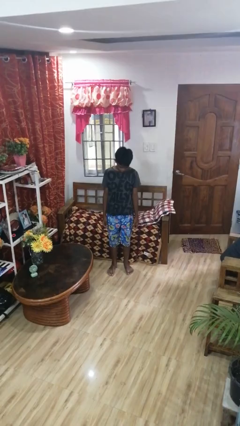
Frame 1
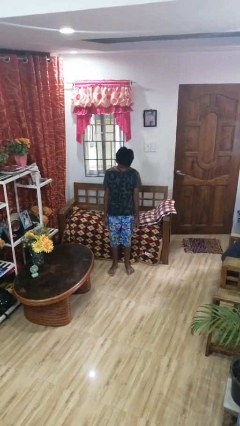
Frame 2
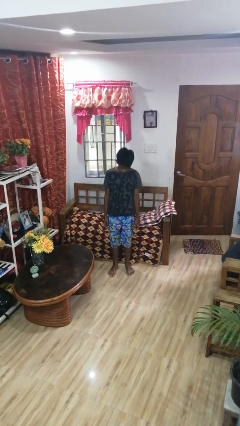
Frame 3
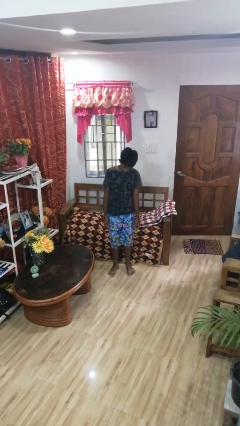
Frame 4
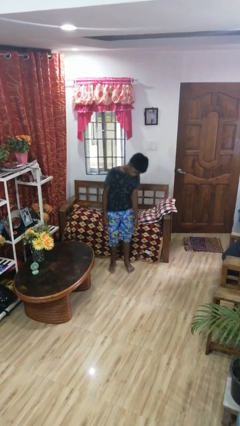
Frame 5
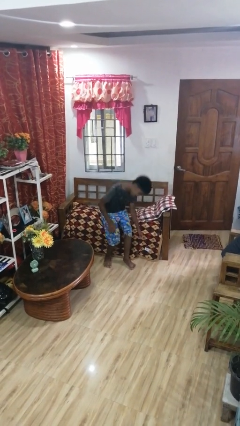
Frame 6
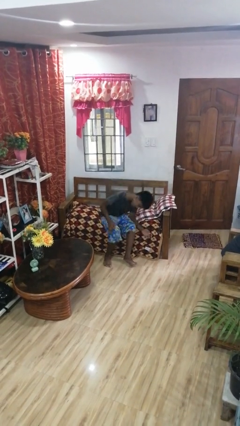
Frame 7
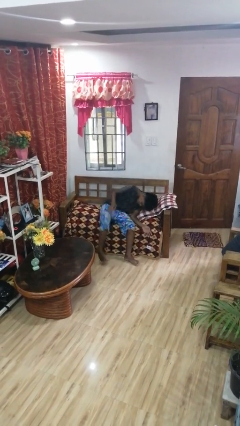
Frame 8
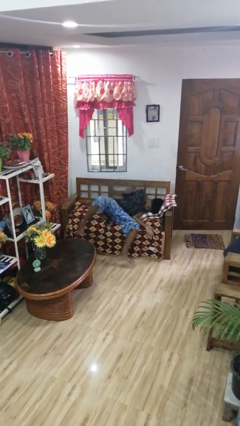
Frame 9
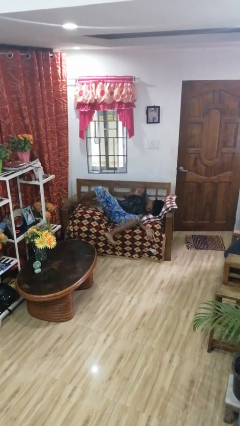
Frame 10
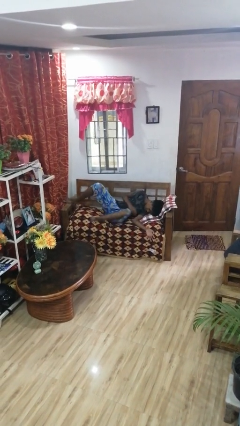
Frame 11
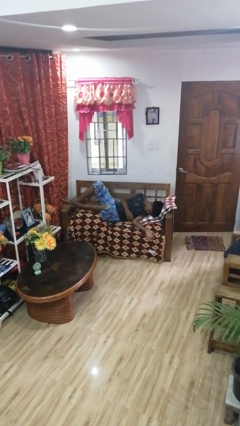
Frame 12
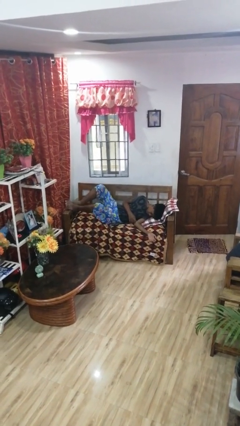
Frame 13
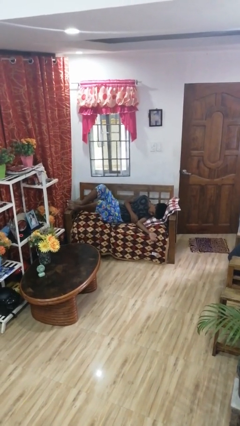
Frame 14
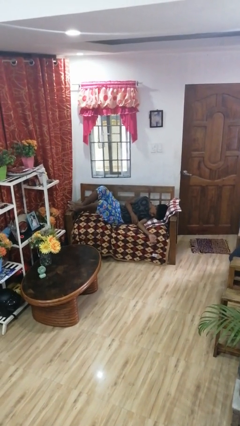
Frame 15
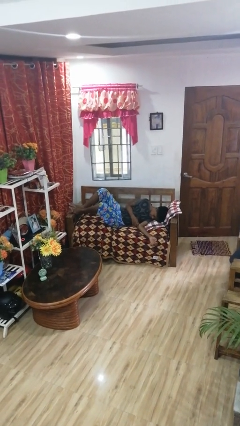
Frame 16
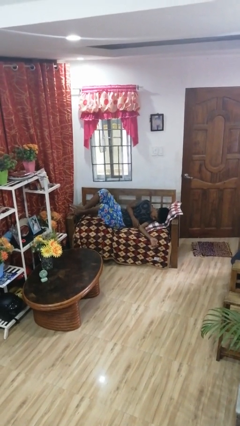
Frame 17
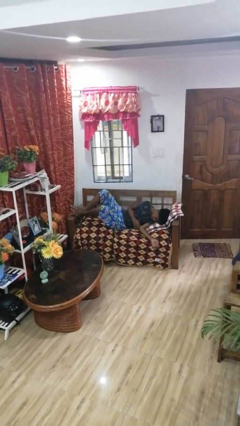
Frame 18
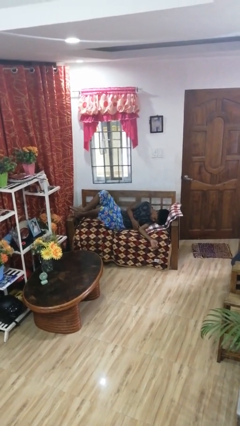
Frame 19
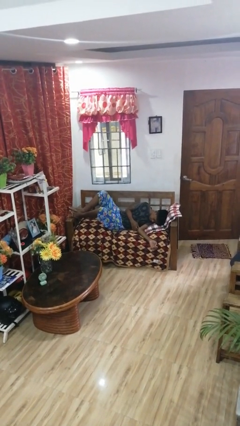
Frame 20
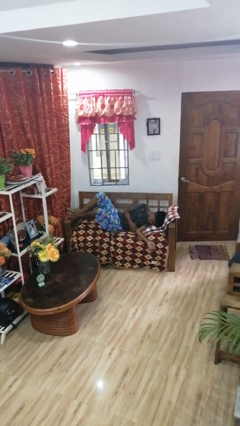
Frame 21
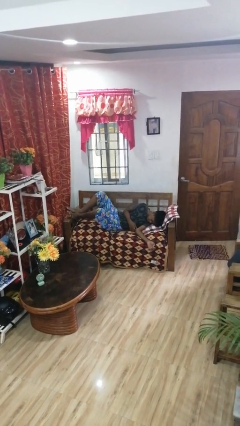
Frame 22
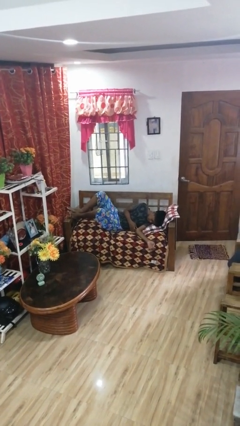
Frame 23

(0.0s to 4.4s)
person lies down on couch

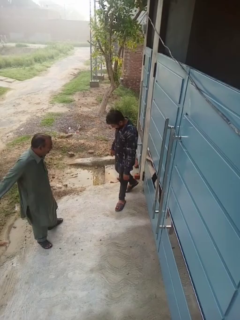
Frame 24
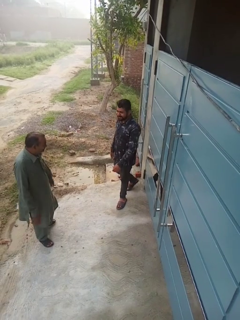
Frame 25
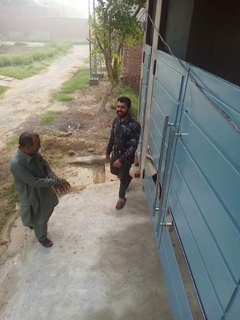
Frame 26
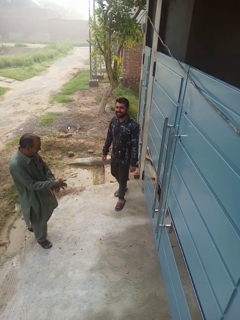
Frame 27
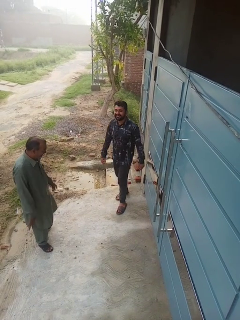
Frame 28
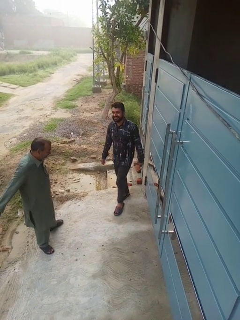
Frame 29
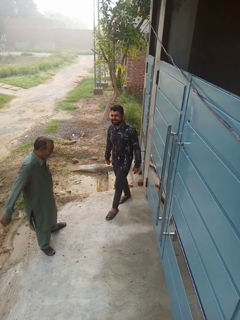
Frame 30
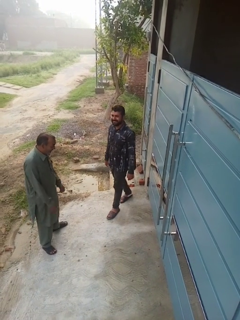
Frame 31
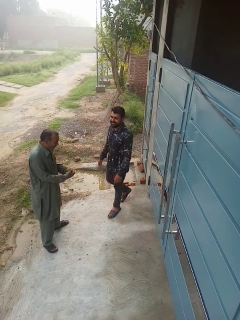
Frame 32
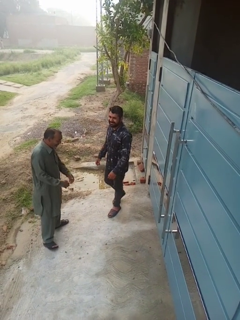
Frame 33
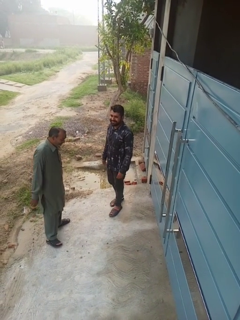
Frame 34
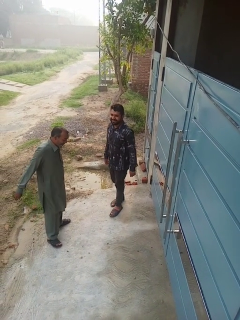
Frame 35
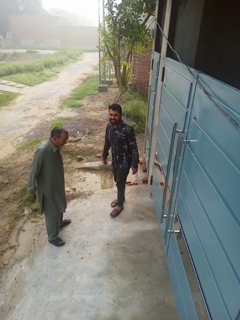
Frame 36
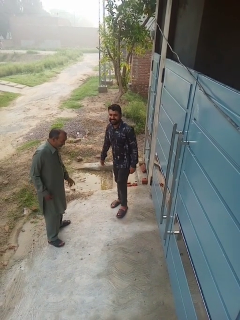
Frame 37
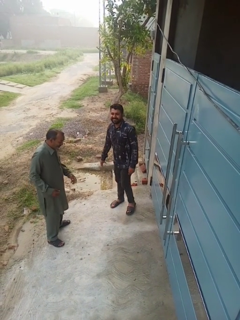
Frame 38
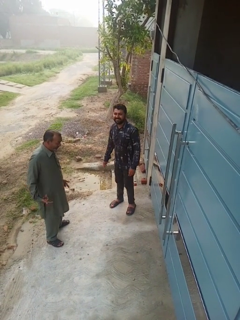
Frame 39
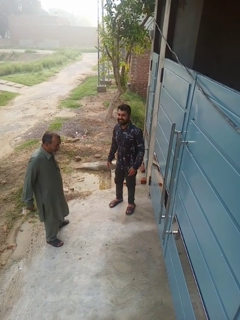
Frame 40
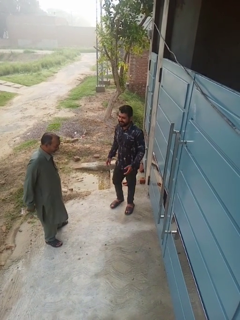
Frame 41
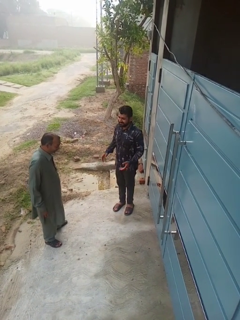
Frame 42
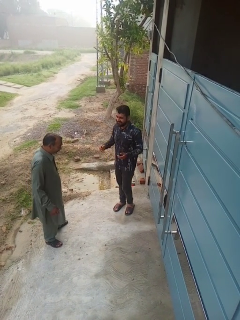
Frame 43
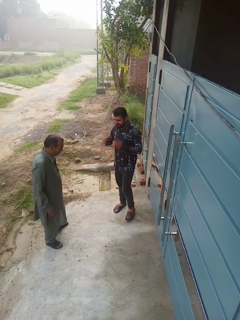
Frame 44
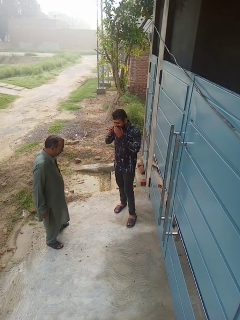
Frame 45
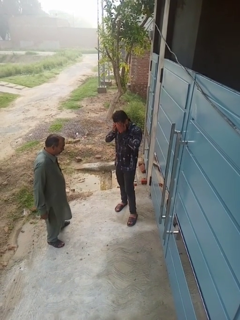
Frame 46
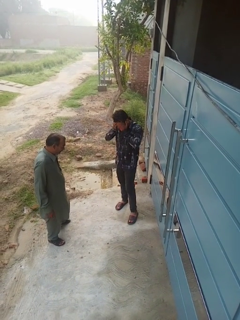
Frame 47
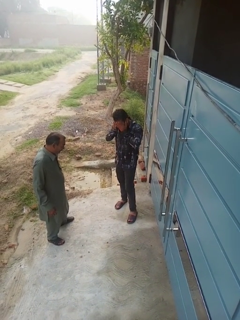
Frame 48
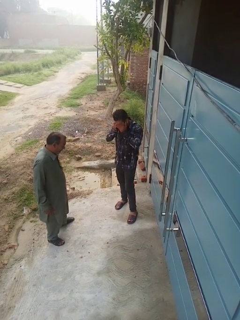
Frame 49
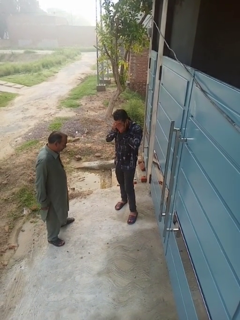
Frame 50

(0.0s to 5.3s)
person laughs with person

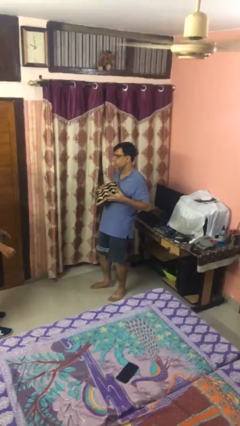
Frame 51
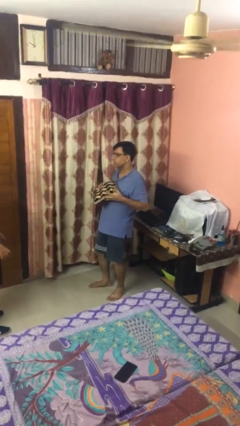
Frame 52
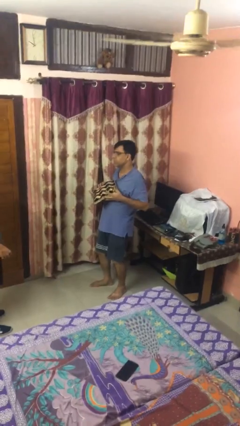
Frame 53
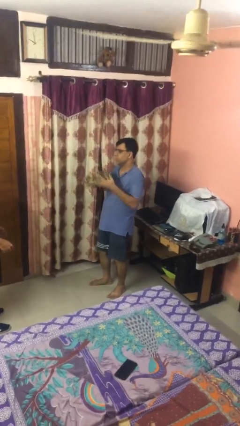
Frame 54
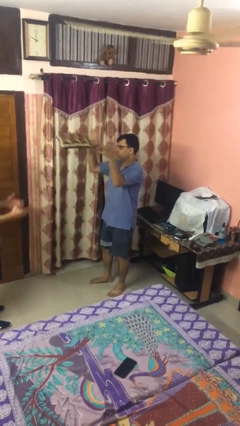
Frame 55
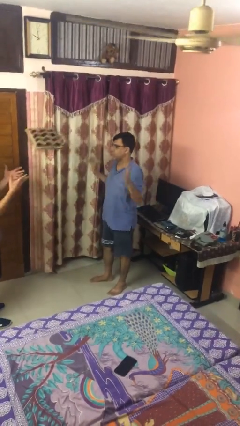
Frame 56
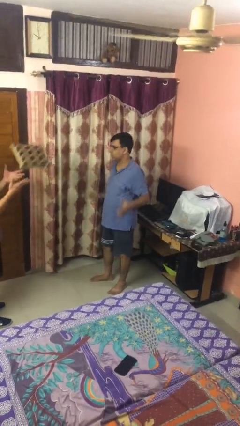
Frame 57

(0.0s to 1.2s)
person throws object to person

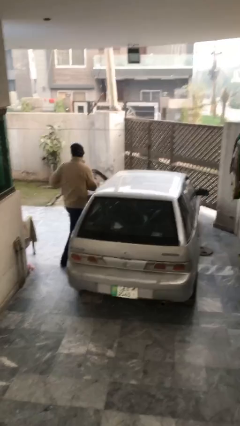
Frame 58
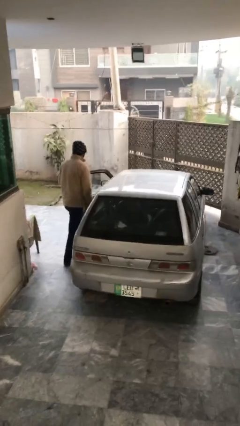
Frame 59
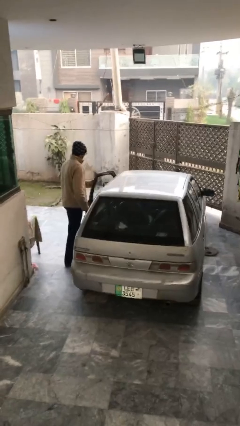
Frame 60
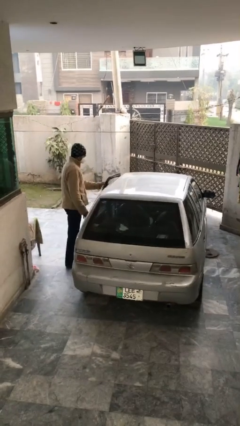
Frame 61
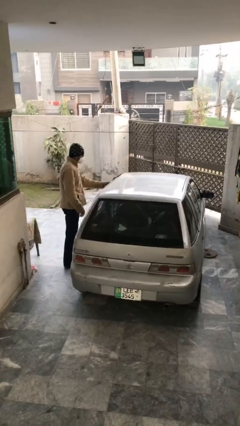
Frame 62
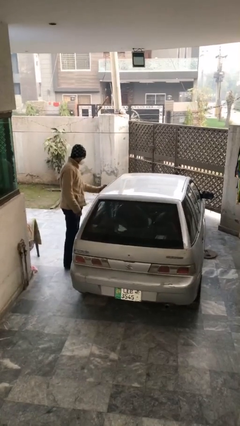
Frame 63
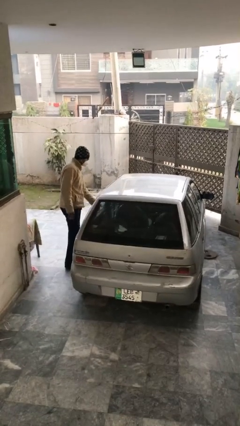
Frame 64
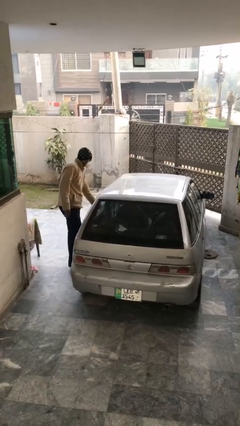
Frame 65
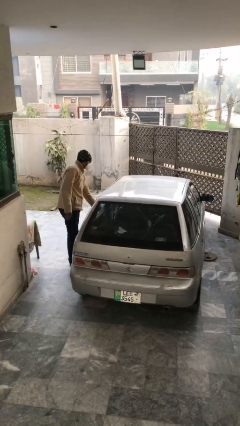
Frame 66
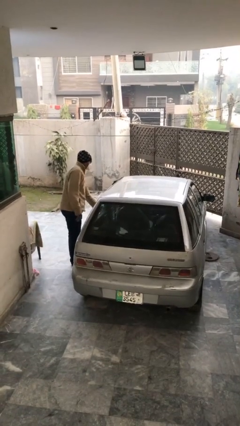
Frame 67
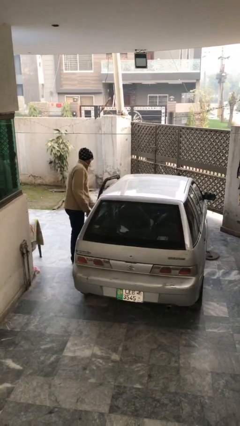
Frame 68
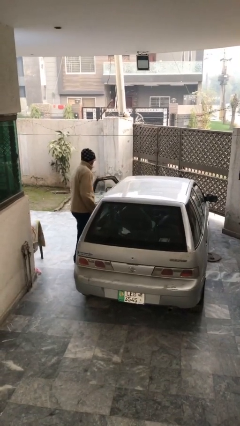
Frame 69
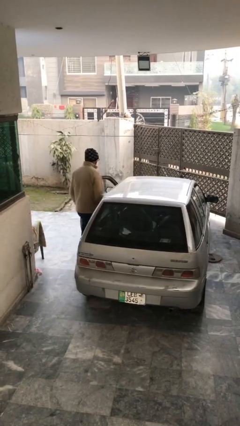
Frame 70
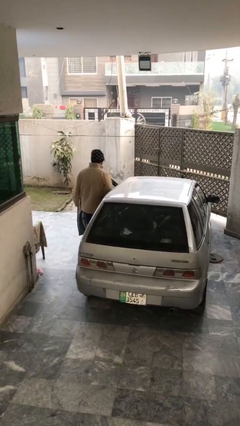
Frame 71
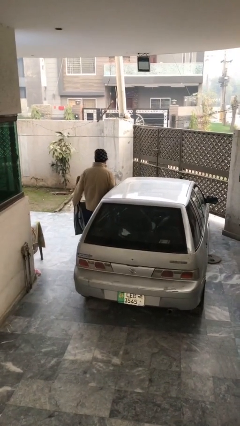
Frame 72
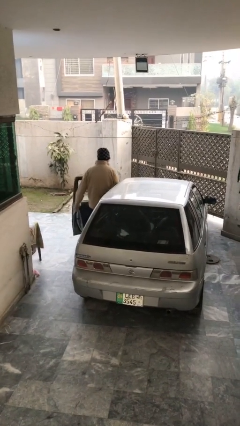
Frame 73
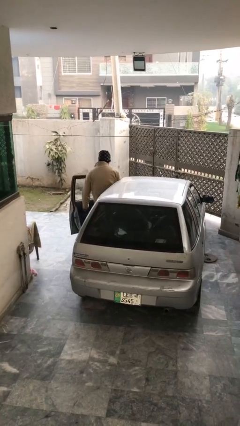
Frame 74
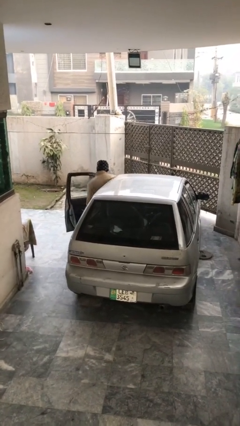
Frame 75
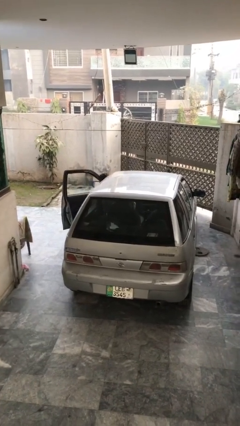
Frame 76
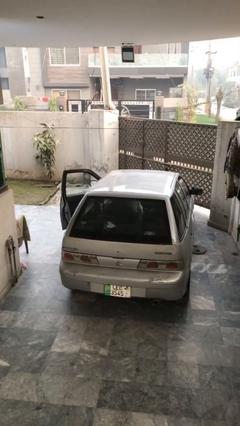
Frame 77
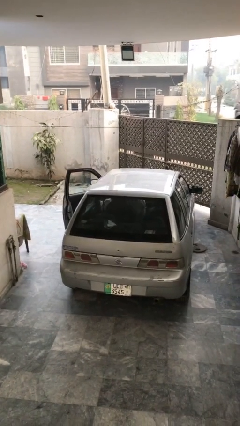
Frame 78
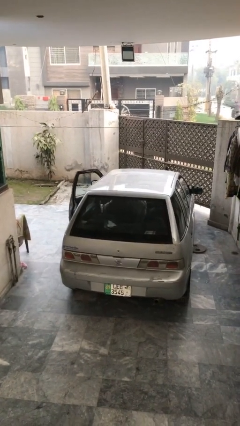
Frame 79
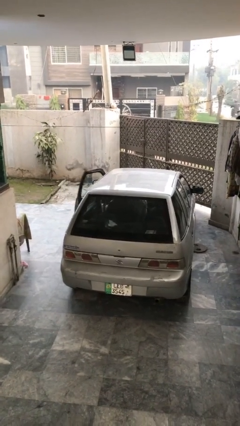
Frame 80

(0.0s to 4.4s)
car picks up person

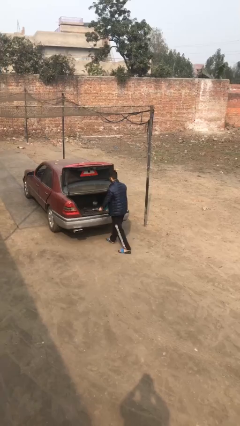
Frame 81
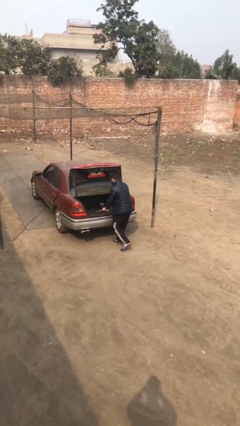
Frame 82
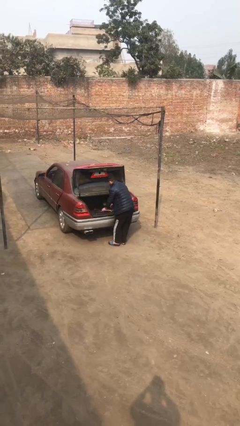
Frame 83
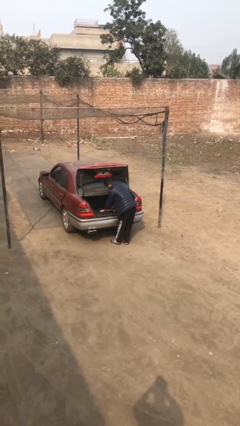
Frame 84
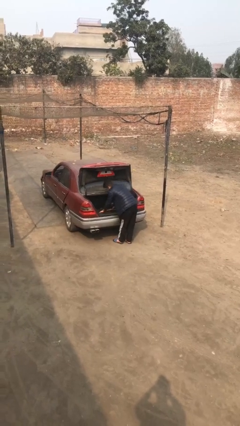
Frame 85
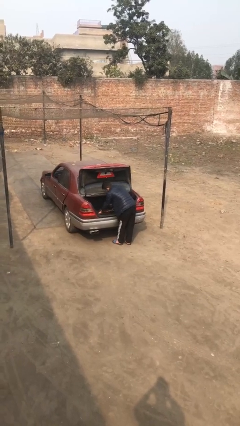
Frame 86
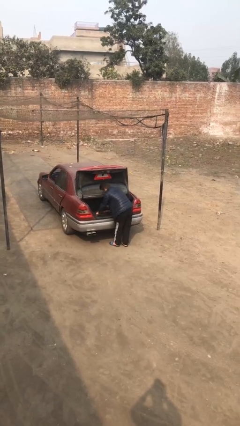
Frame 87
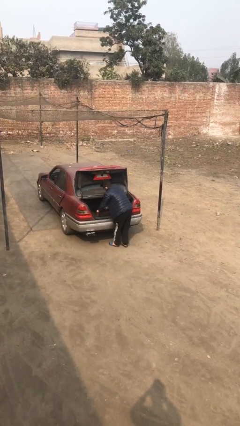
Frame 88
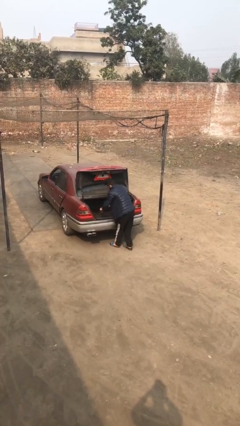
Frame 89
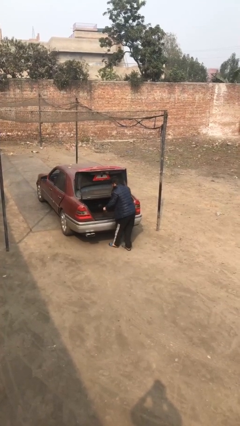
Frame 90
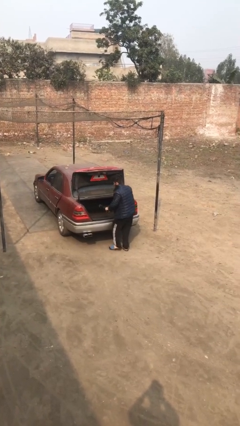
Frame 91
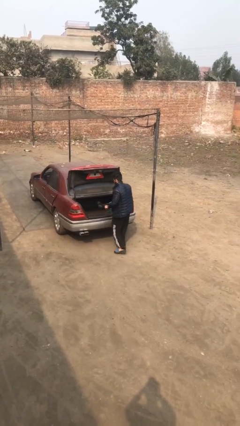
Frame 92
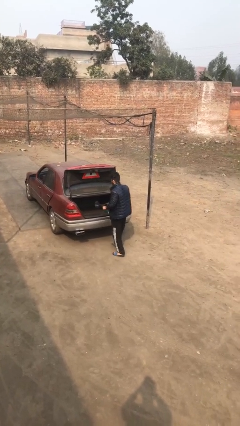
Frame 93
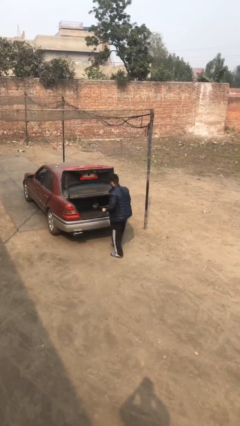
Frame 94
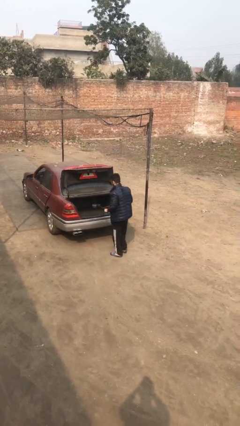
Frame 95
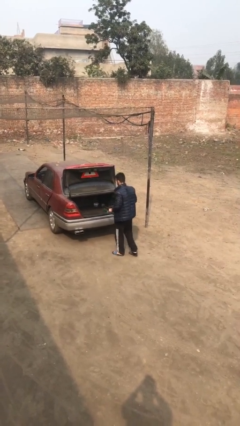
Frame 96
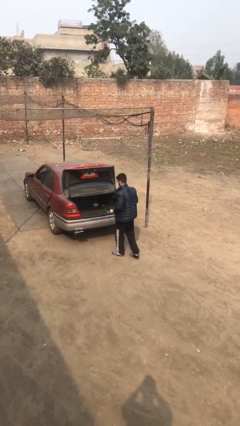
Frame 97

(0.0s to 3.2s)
person unloads car

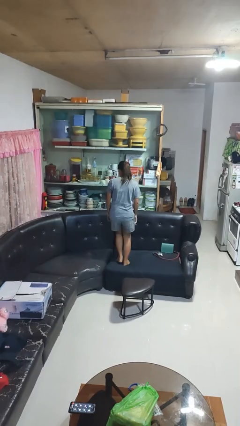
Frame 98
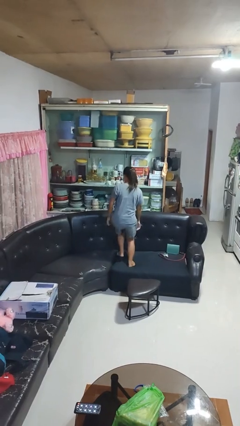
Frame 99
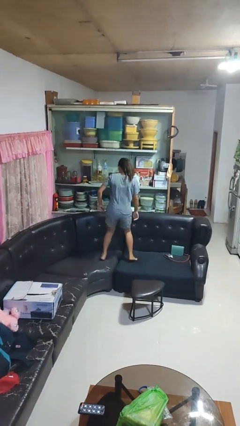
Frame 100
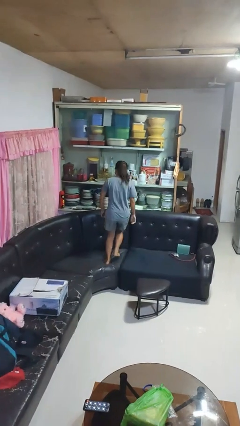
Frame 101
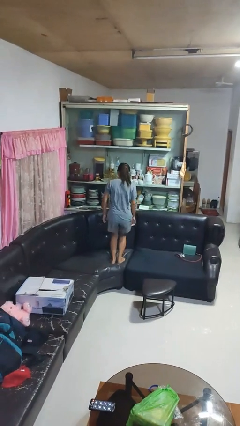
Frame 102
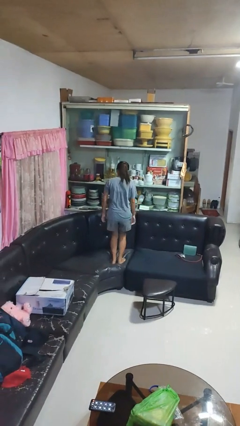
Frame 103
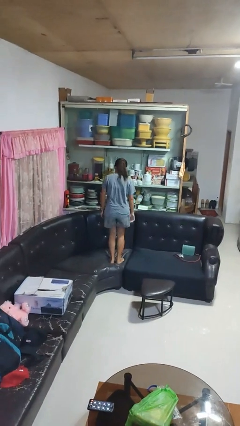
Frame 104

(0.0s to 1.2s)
person jumps on couch
